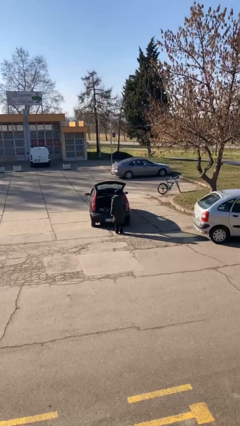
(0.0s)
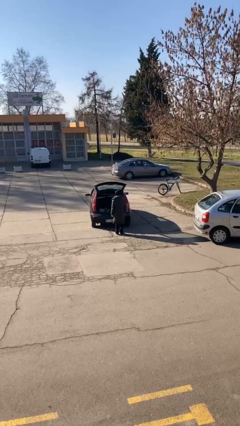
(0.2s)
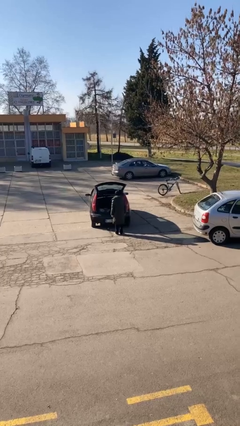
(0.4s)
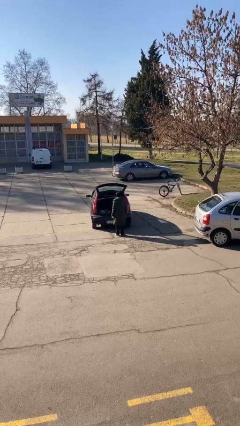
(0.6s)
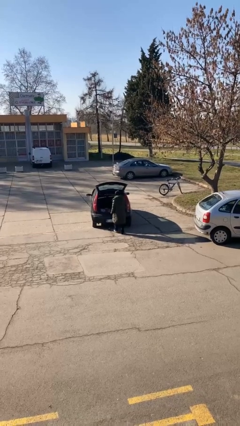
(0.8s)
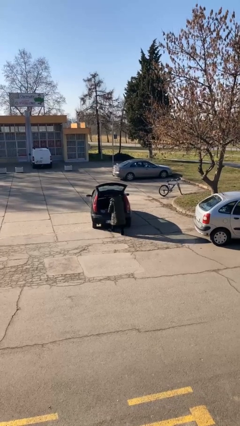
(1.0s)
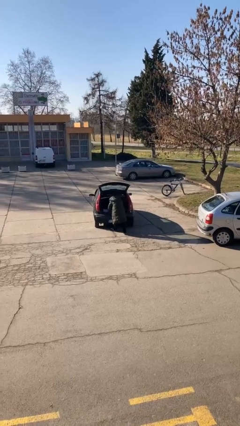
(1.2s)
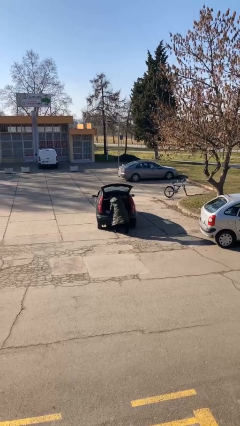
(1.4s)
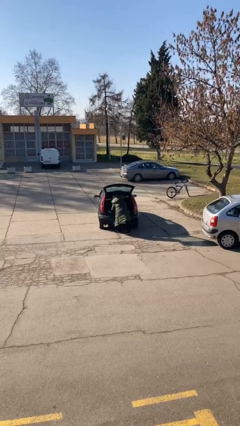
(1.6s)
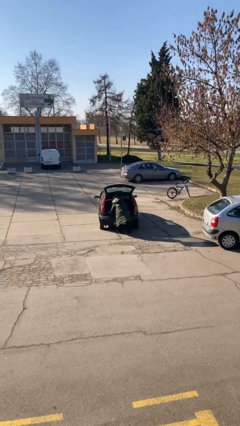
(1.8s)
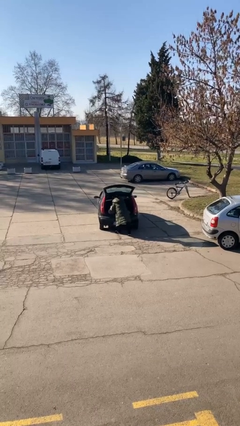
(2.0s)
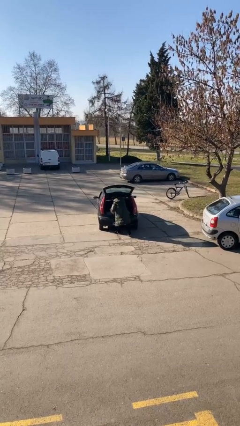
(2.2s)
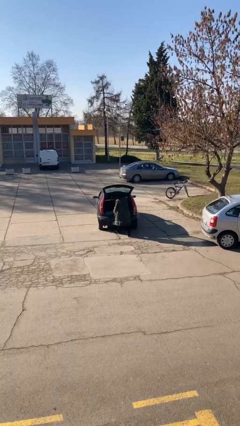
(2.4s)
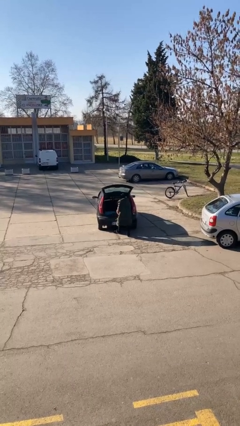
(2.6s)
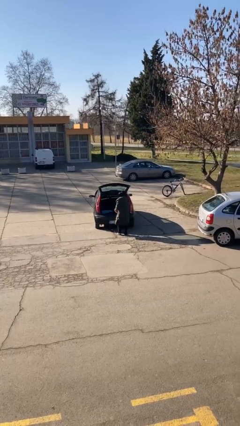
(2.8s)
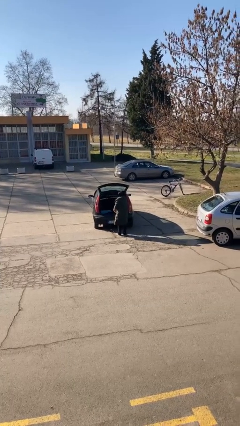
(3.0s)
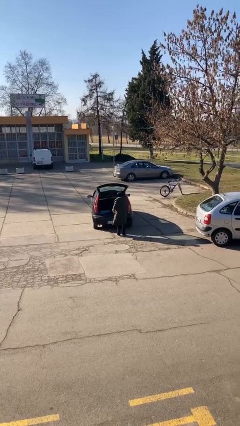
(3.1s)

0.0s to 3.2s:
person unloads car

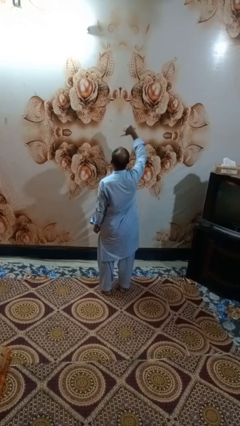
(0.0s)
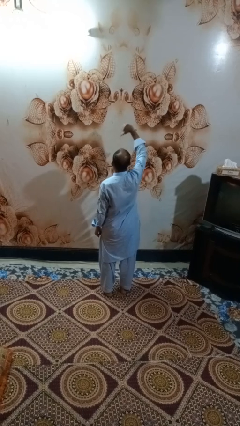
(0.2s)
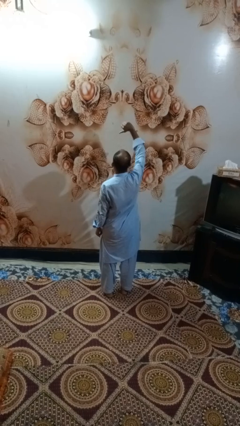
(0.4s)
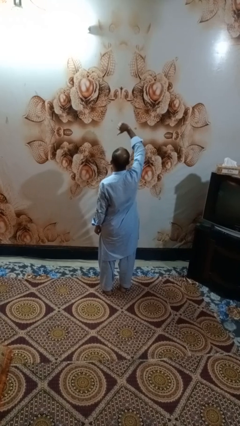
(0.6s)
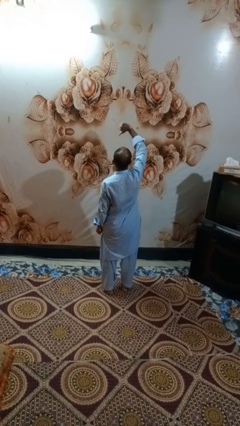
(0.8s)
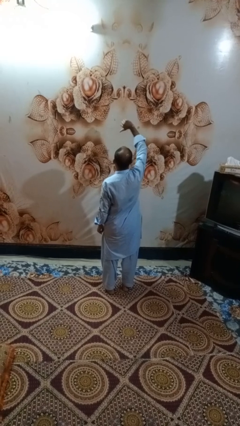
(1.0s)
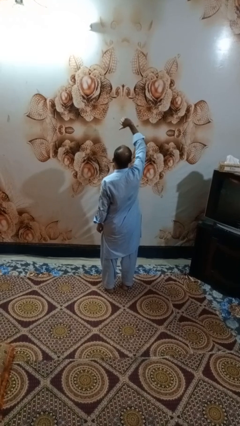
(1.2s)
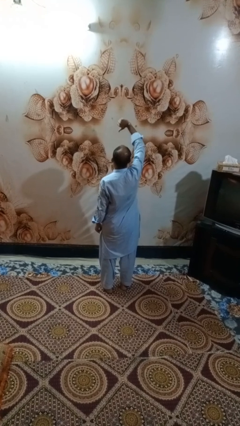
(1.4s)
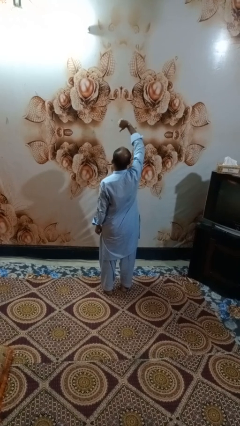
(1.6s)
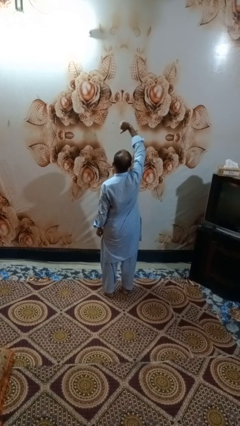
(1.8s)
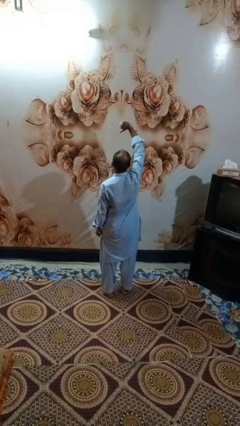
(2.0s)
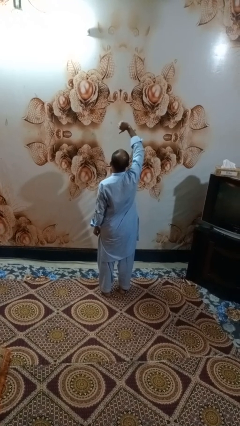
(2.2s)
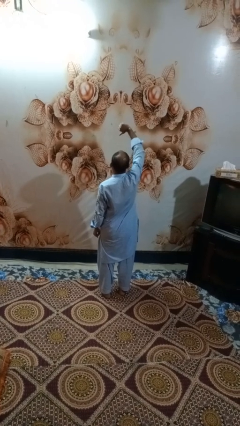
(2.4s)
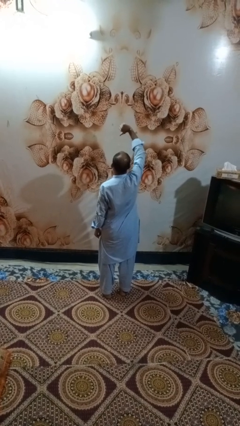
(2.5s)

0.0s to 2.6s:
person gestures thumbs down

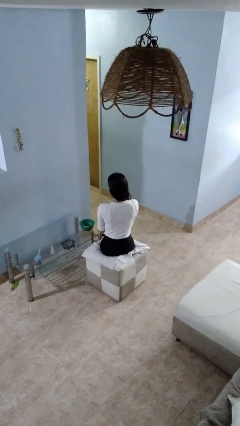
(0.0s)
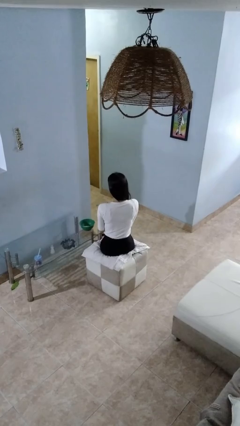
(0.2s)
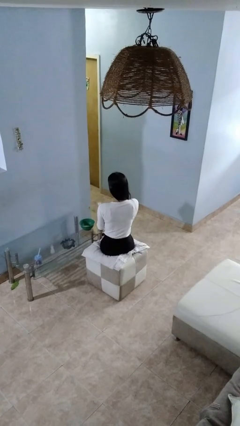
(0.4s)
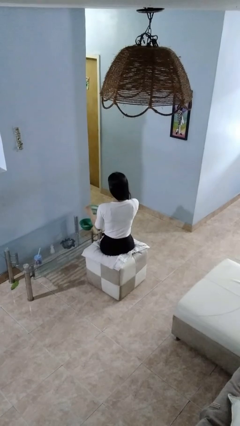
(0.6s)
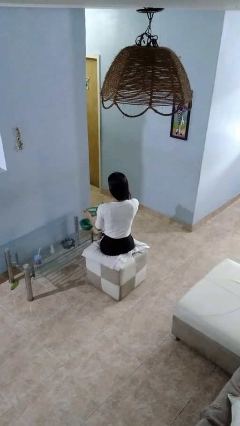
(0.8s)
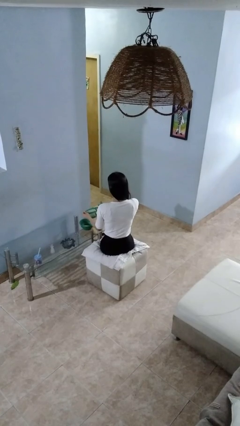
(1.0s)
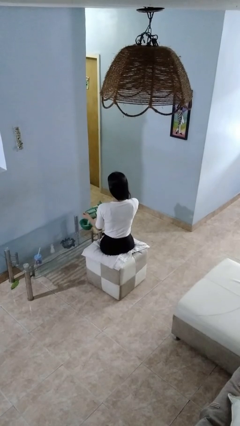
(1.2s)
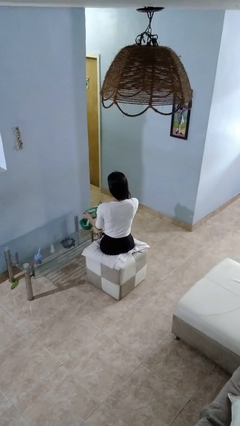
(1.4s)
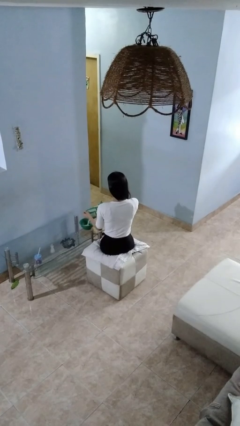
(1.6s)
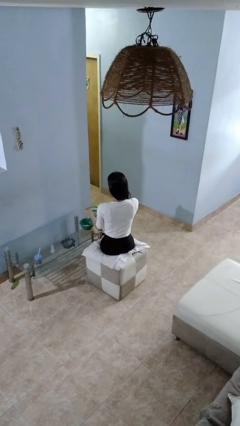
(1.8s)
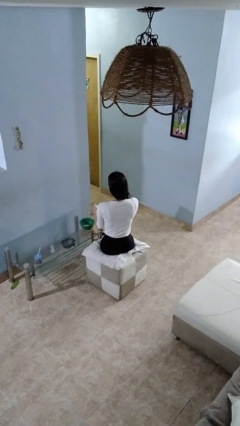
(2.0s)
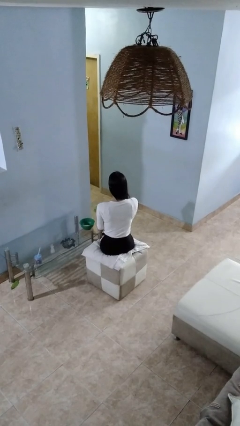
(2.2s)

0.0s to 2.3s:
person pours into bowl

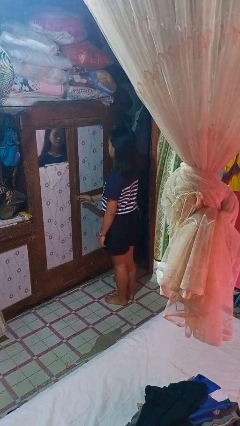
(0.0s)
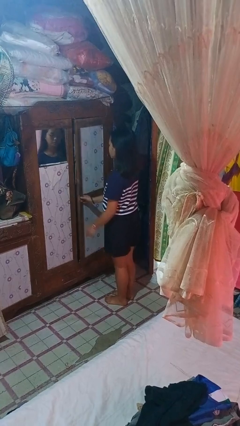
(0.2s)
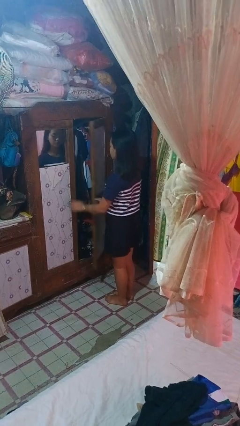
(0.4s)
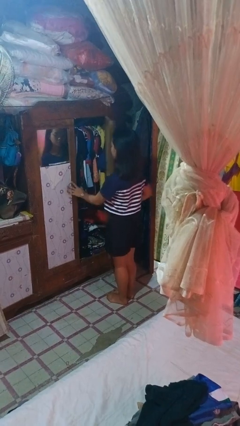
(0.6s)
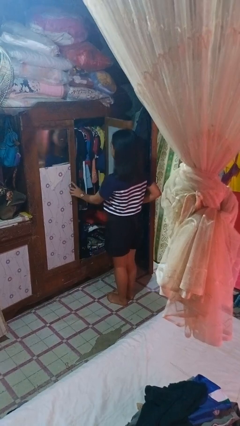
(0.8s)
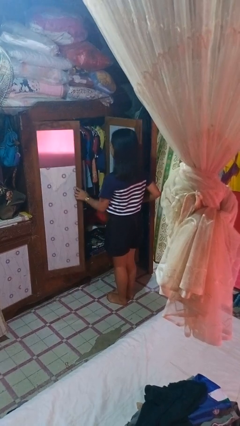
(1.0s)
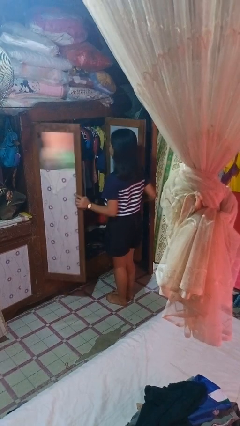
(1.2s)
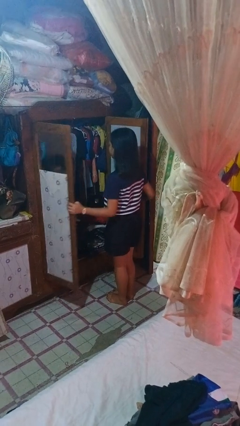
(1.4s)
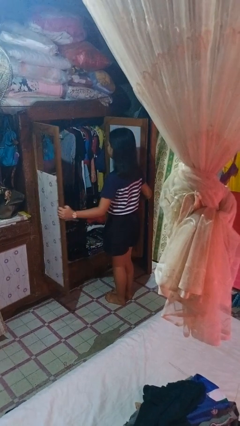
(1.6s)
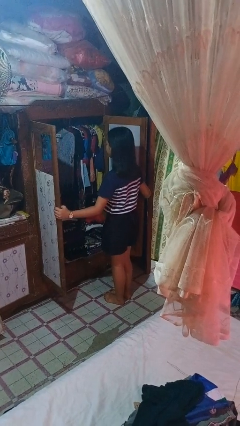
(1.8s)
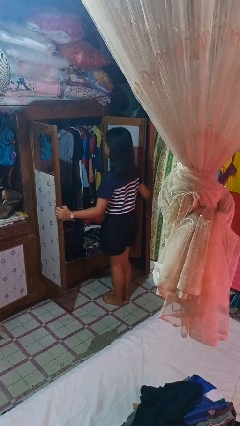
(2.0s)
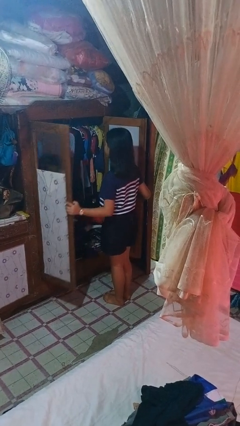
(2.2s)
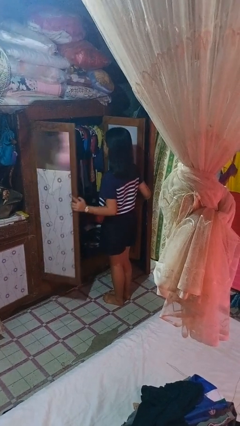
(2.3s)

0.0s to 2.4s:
person opens closet door

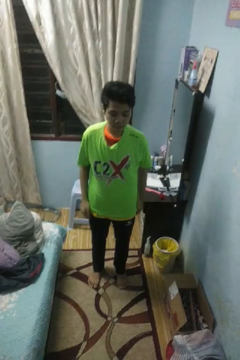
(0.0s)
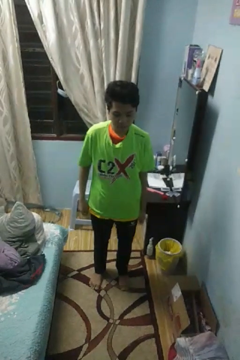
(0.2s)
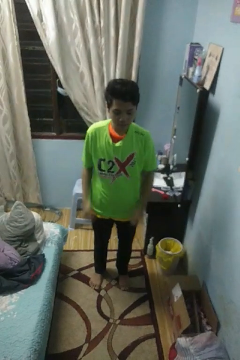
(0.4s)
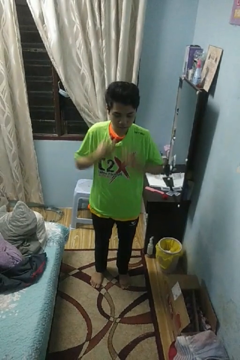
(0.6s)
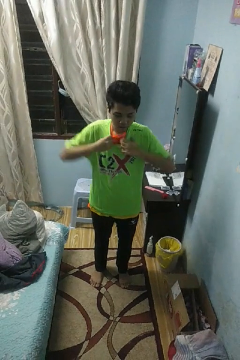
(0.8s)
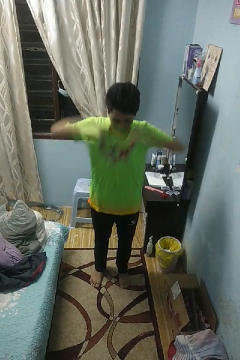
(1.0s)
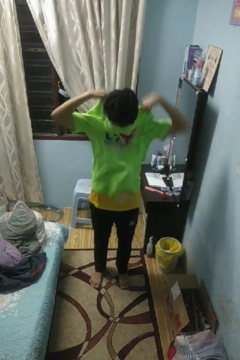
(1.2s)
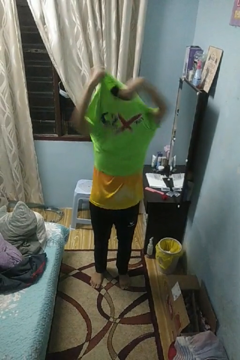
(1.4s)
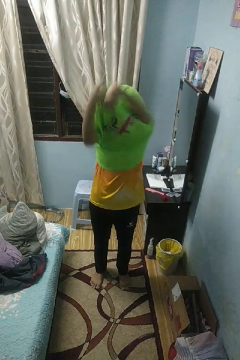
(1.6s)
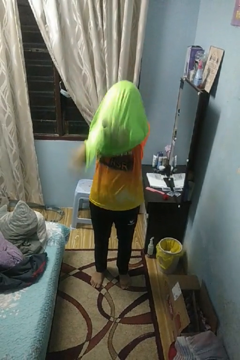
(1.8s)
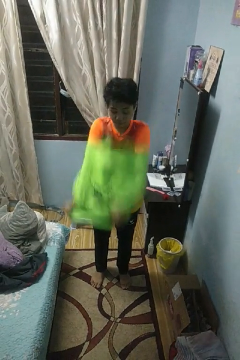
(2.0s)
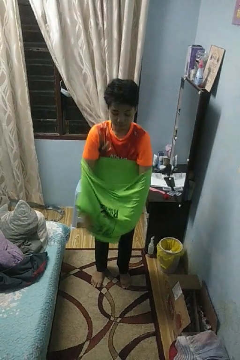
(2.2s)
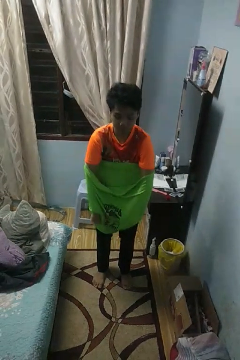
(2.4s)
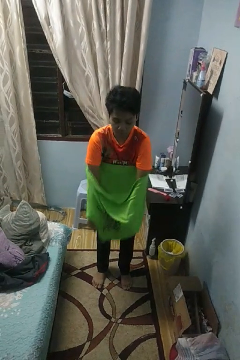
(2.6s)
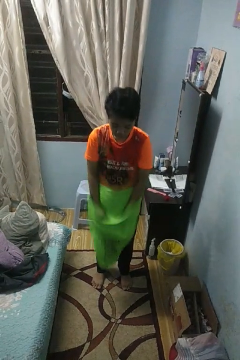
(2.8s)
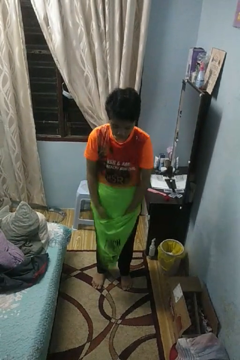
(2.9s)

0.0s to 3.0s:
person takes off shirt

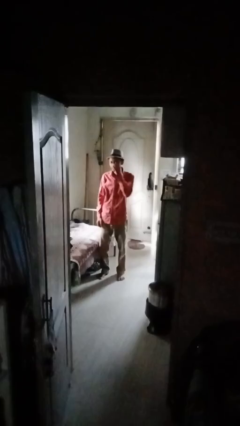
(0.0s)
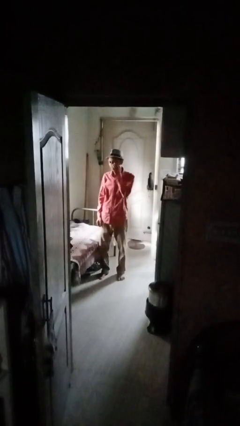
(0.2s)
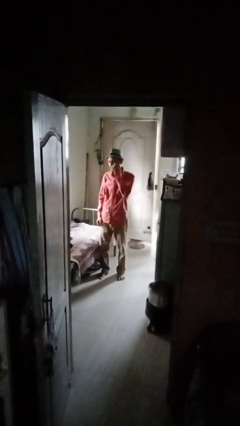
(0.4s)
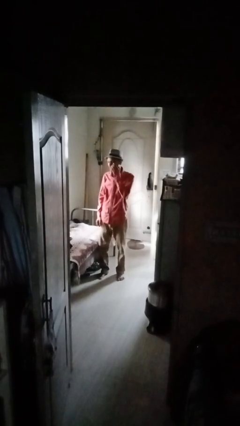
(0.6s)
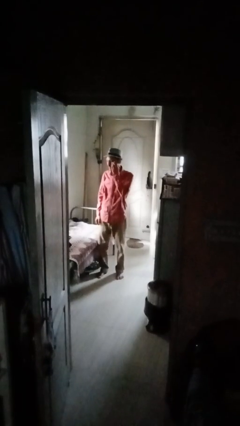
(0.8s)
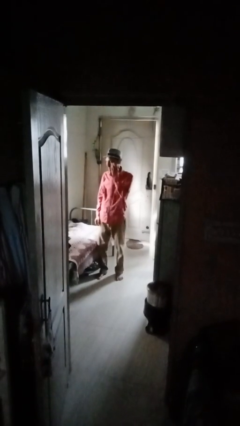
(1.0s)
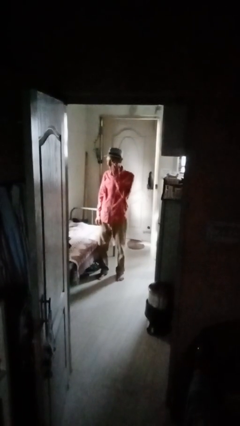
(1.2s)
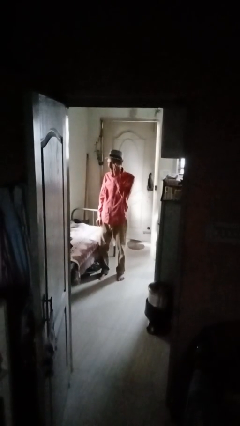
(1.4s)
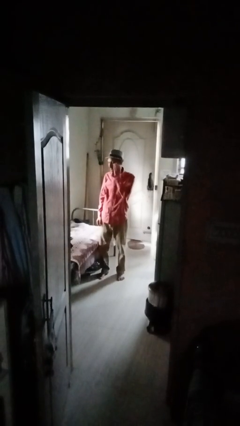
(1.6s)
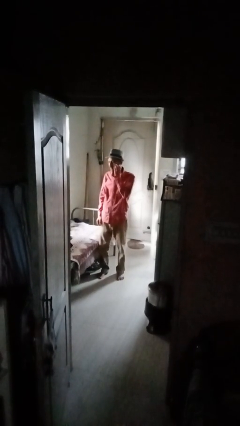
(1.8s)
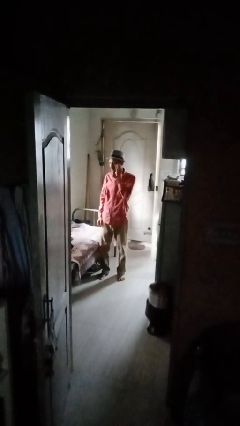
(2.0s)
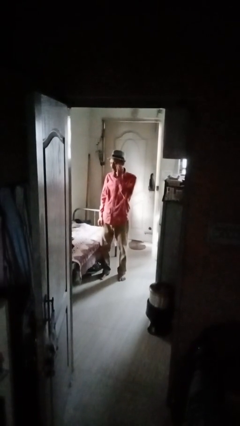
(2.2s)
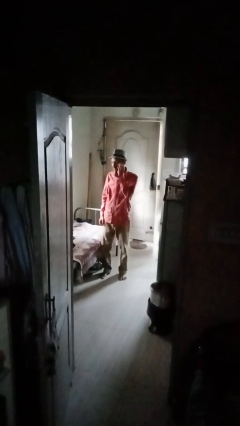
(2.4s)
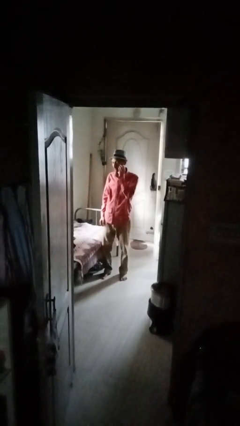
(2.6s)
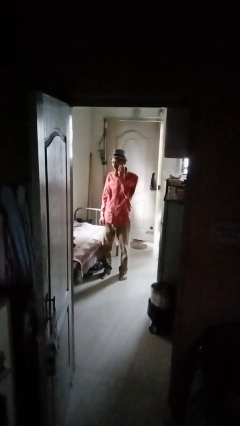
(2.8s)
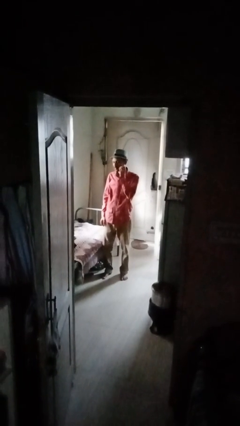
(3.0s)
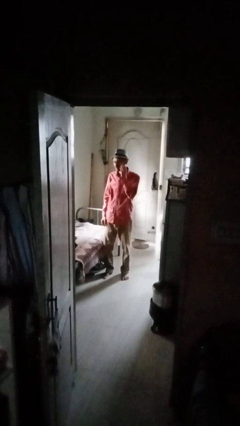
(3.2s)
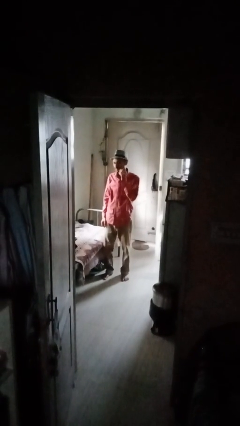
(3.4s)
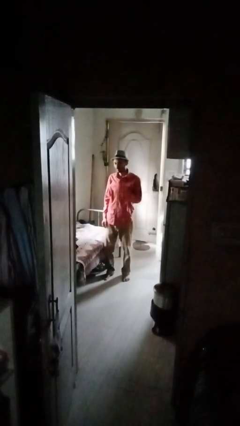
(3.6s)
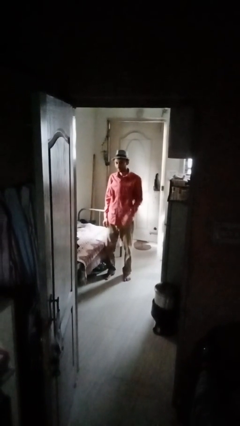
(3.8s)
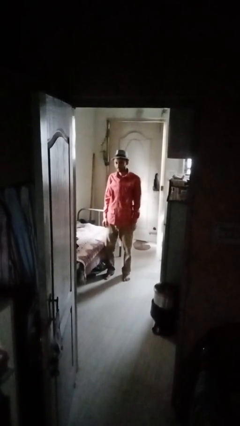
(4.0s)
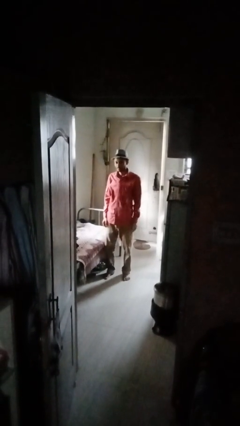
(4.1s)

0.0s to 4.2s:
person scratches face

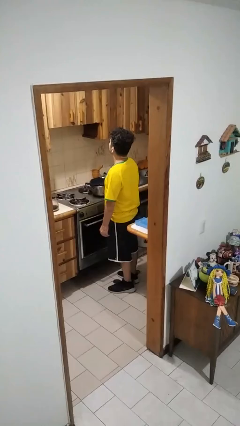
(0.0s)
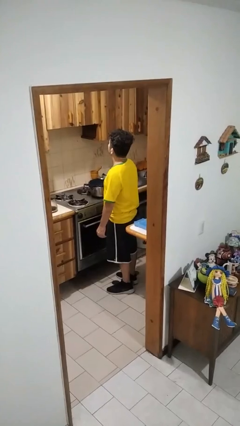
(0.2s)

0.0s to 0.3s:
person closes cabinet
